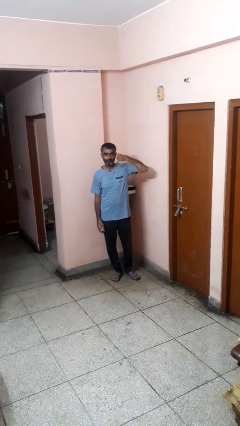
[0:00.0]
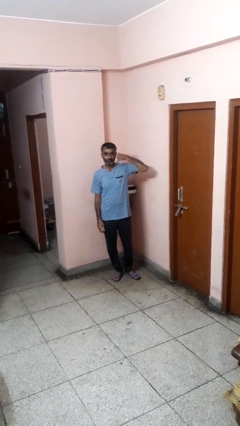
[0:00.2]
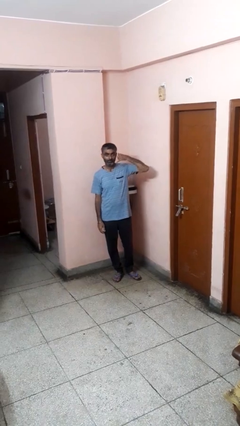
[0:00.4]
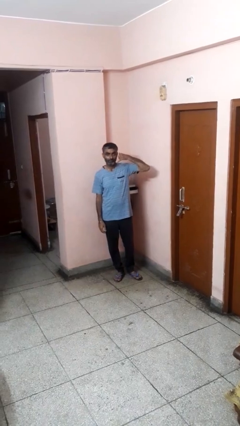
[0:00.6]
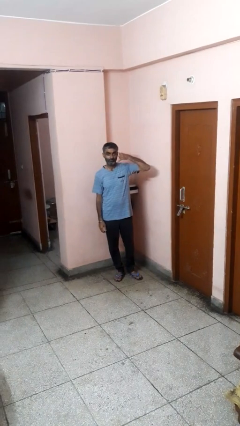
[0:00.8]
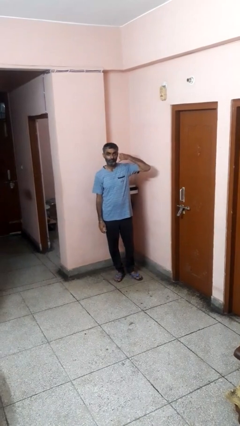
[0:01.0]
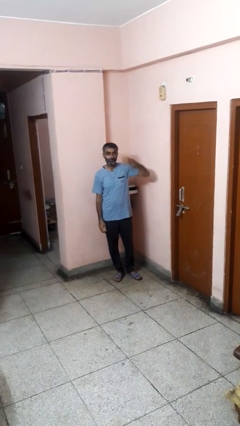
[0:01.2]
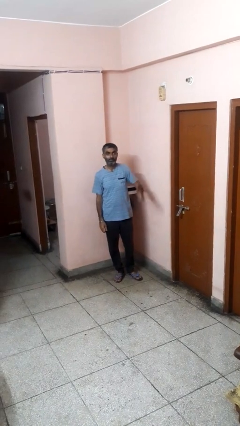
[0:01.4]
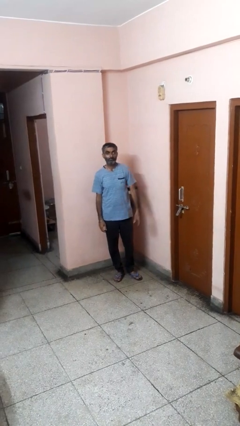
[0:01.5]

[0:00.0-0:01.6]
person gestures call me

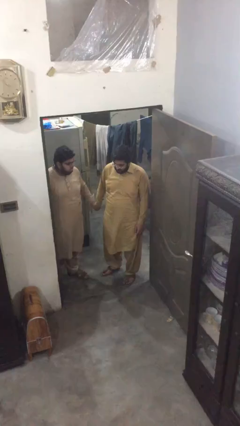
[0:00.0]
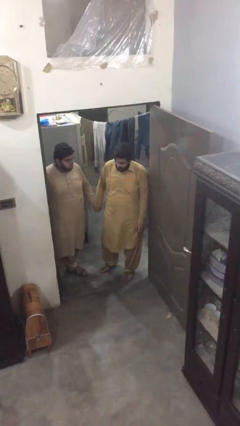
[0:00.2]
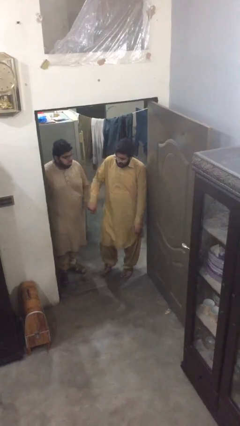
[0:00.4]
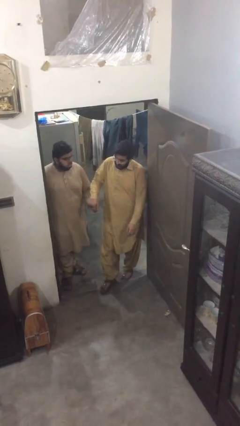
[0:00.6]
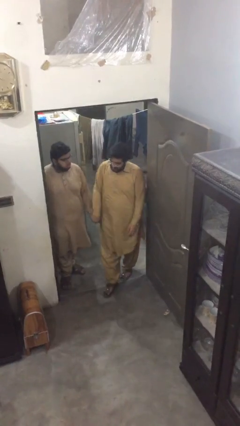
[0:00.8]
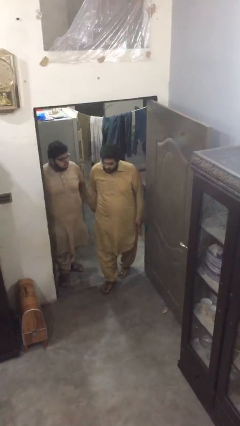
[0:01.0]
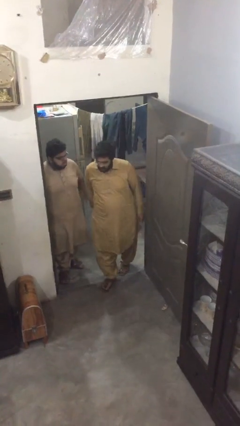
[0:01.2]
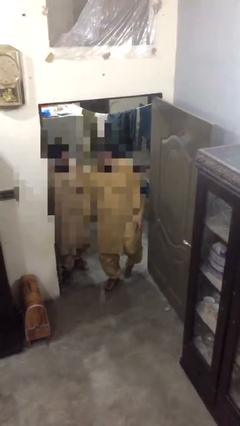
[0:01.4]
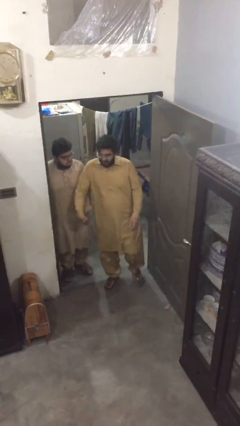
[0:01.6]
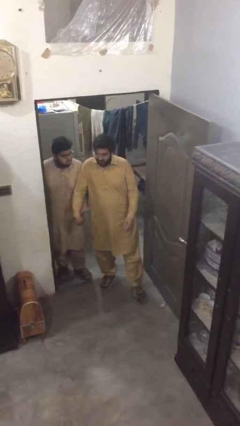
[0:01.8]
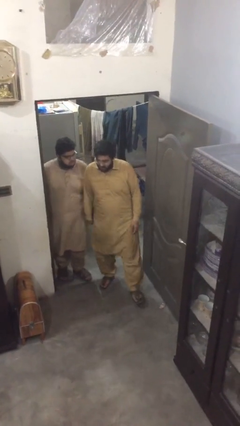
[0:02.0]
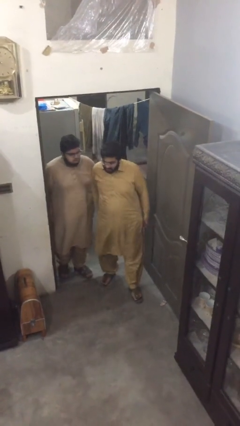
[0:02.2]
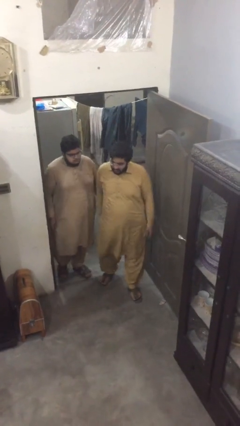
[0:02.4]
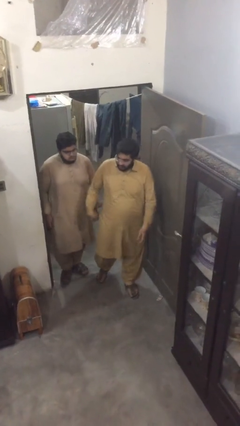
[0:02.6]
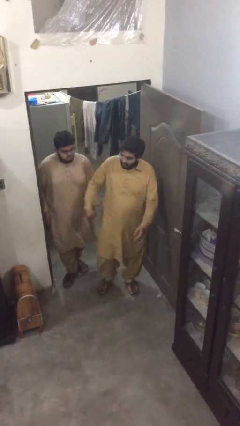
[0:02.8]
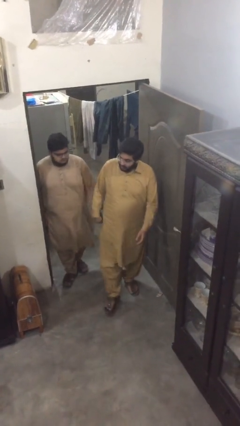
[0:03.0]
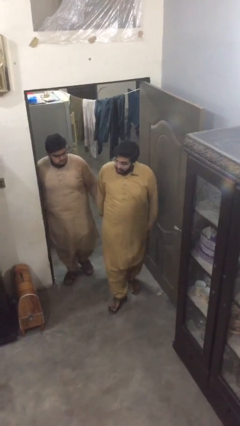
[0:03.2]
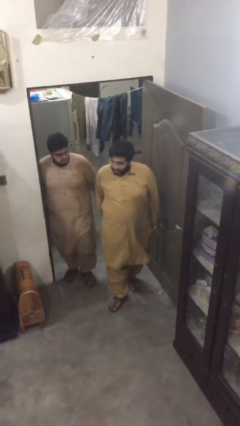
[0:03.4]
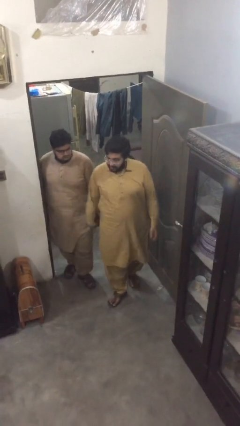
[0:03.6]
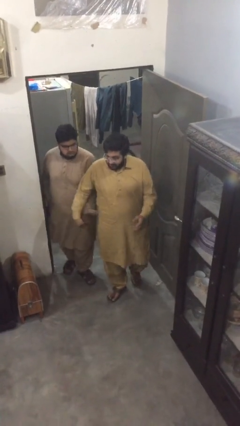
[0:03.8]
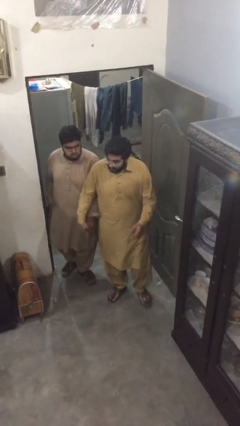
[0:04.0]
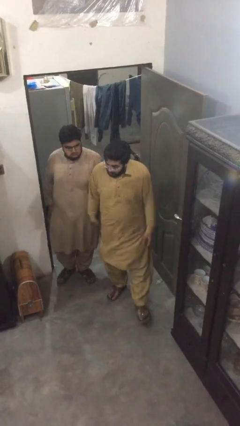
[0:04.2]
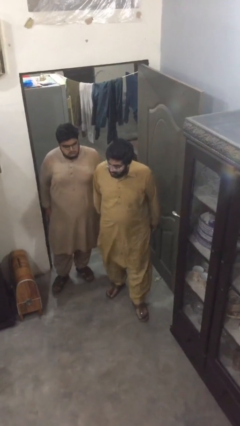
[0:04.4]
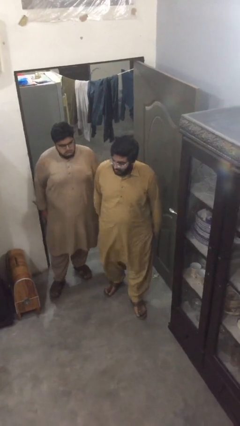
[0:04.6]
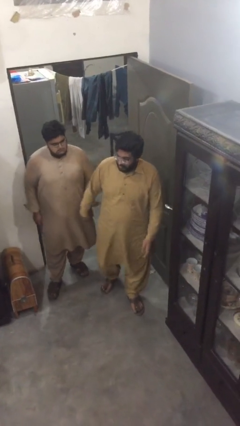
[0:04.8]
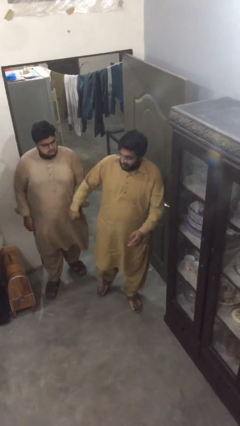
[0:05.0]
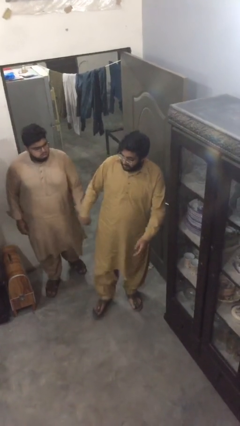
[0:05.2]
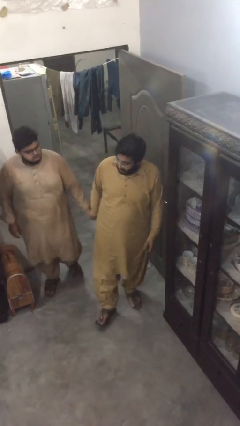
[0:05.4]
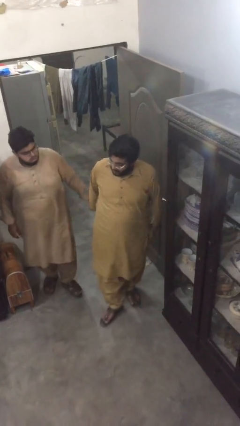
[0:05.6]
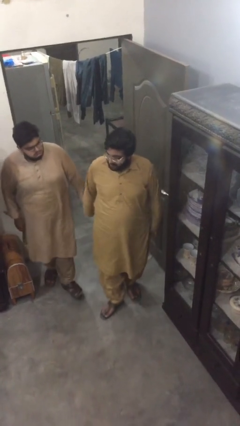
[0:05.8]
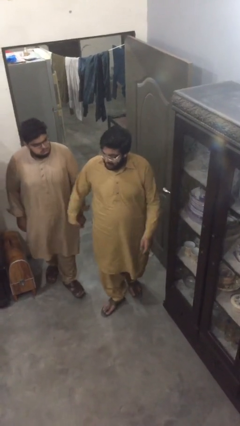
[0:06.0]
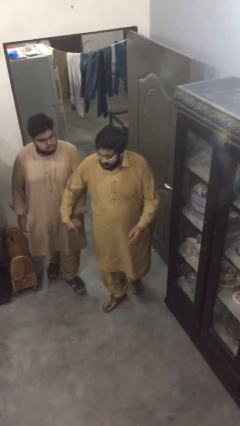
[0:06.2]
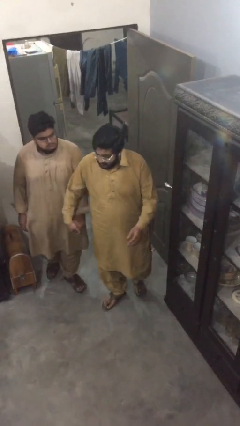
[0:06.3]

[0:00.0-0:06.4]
person holds hand

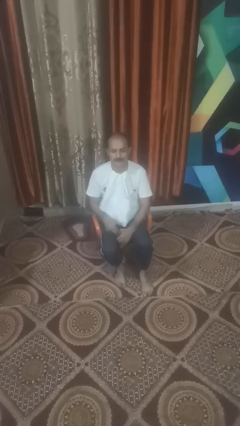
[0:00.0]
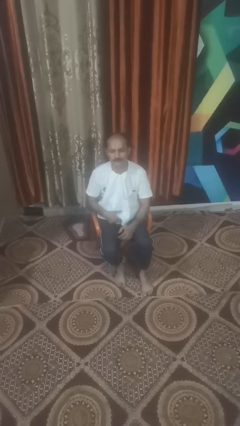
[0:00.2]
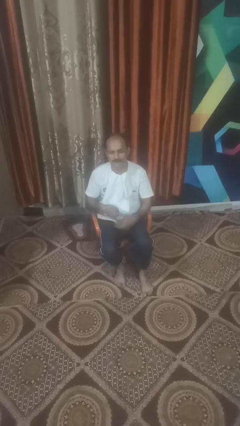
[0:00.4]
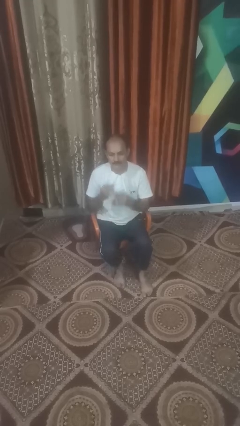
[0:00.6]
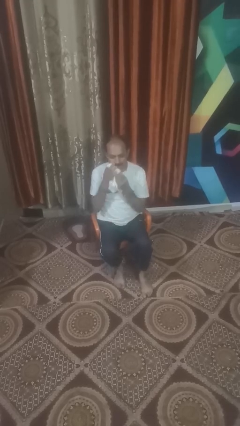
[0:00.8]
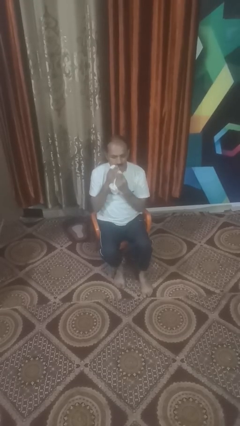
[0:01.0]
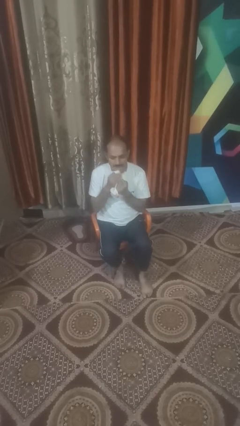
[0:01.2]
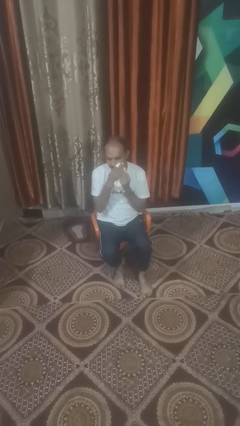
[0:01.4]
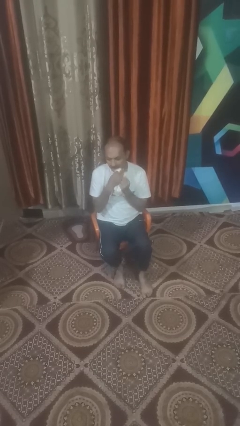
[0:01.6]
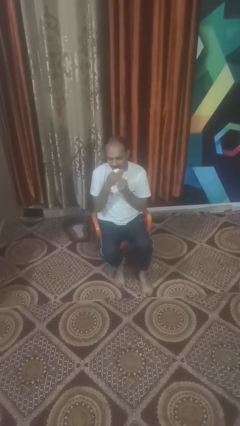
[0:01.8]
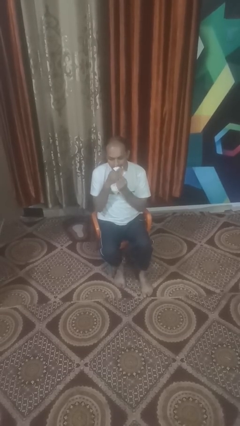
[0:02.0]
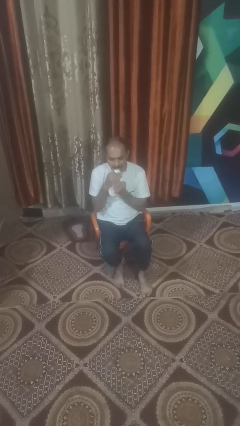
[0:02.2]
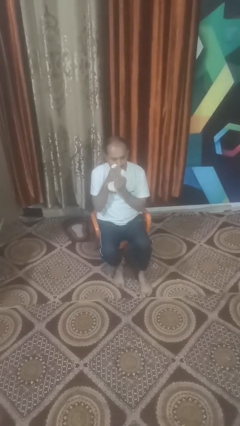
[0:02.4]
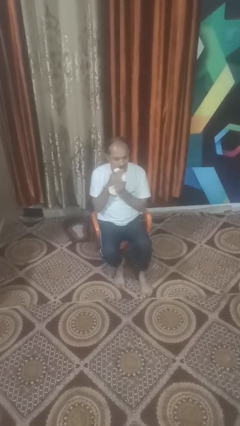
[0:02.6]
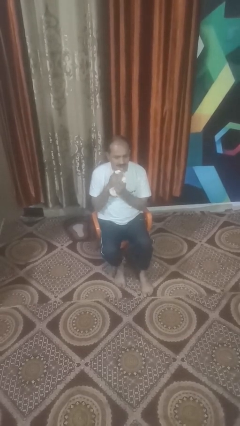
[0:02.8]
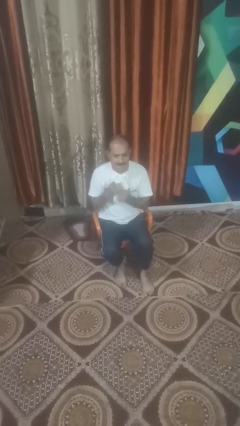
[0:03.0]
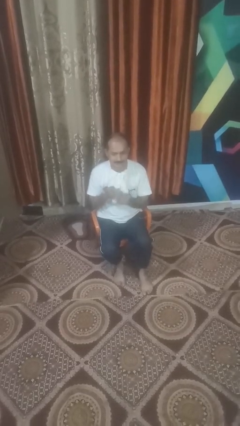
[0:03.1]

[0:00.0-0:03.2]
person wipes mouth with napkin

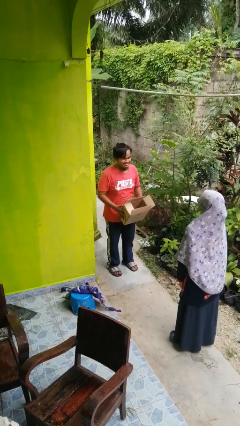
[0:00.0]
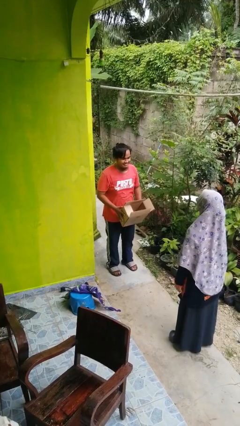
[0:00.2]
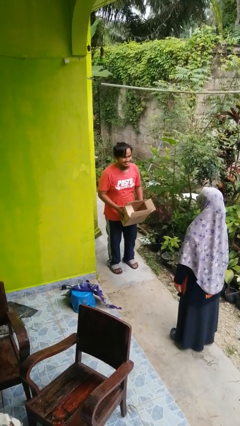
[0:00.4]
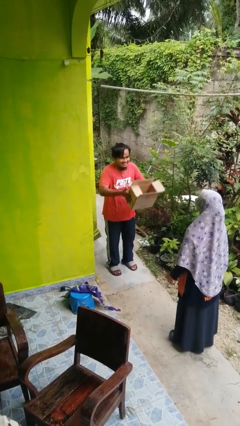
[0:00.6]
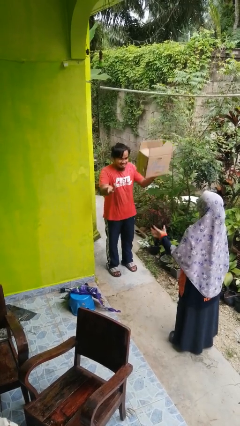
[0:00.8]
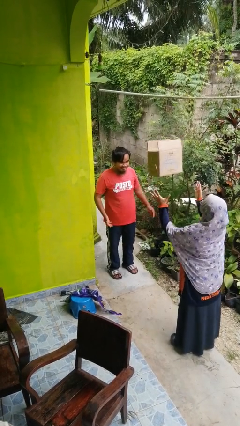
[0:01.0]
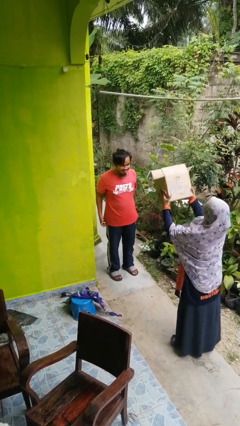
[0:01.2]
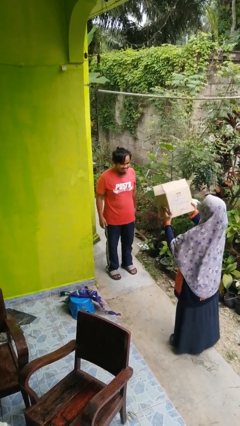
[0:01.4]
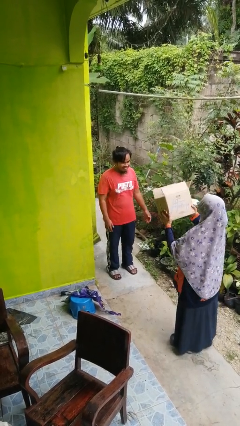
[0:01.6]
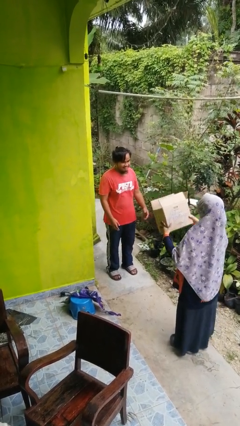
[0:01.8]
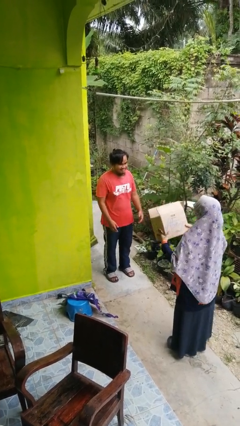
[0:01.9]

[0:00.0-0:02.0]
person throws object to person

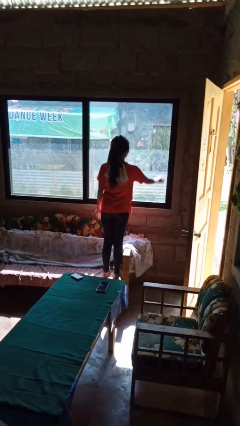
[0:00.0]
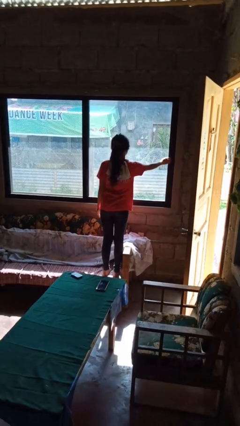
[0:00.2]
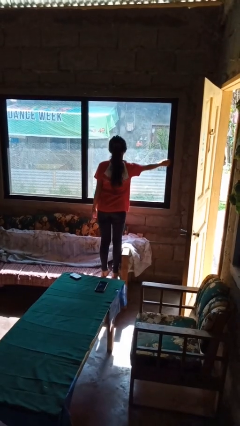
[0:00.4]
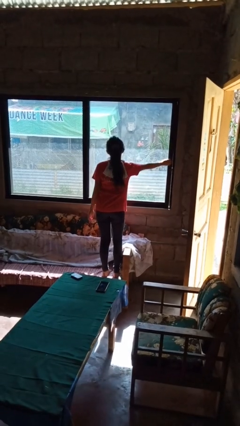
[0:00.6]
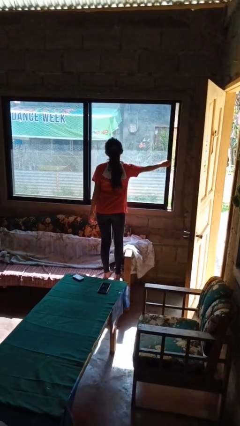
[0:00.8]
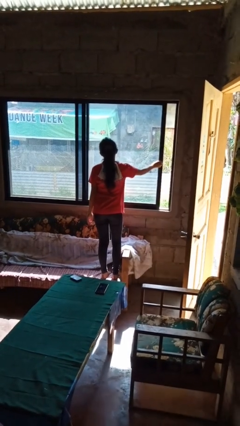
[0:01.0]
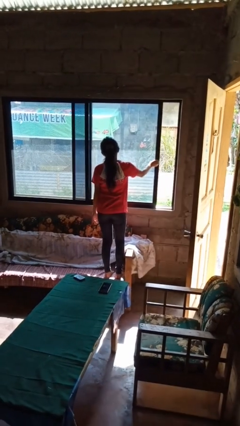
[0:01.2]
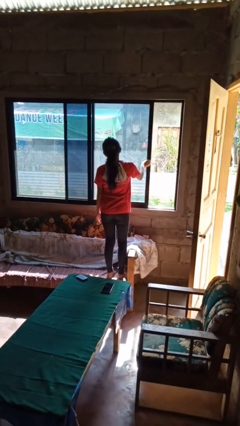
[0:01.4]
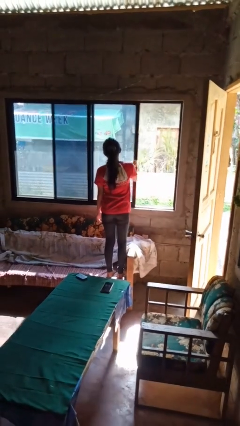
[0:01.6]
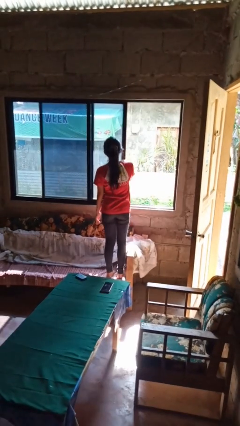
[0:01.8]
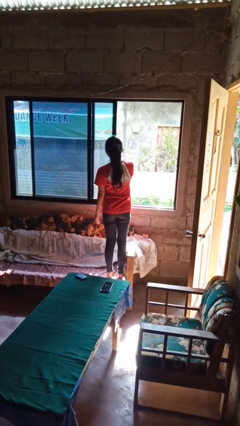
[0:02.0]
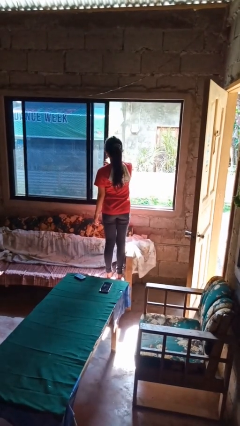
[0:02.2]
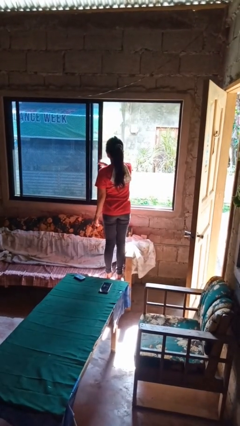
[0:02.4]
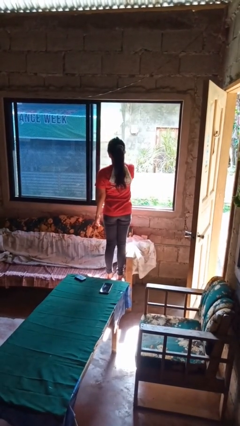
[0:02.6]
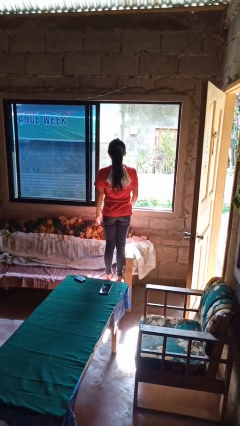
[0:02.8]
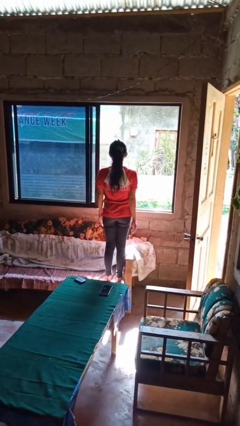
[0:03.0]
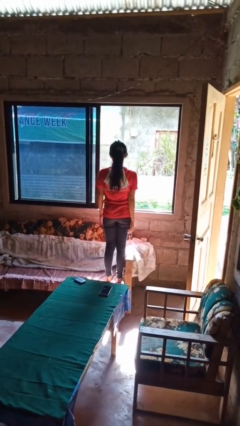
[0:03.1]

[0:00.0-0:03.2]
person opens home window

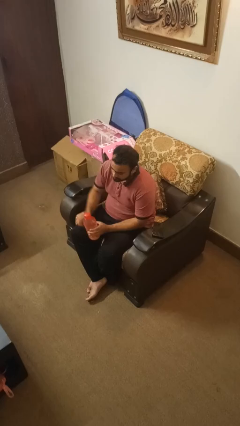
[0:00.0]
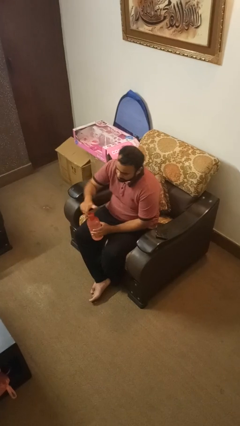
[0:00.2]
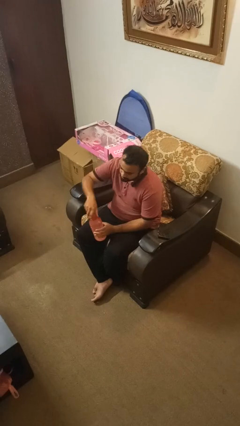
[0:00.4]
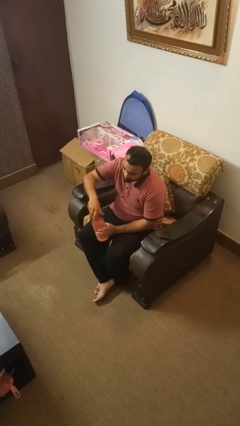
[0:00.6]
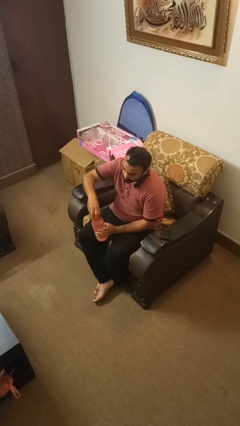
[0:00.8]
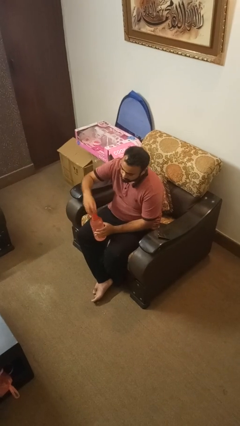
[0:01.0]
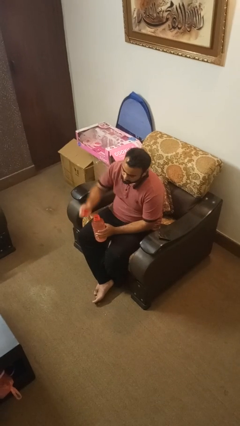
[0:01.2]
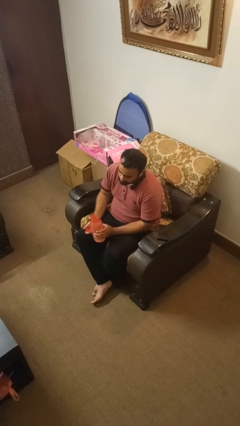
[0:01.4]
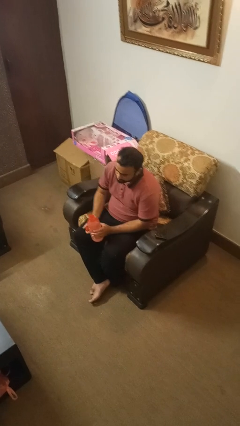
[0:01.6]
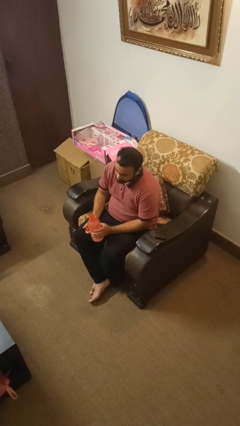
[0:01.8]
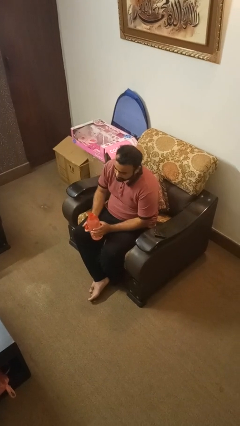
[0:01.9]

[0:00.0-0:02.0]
person unscrews lid from bottle
